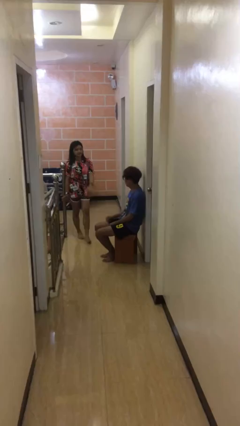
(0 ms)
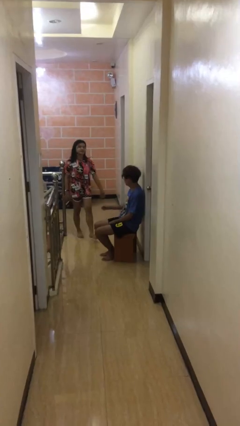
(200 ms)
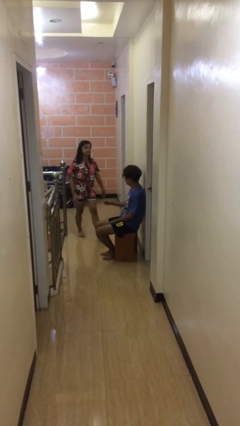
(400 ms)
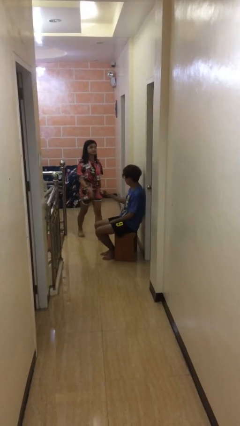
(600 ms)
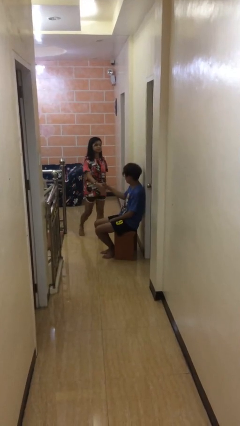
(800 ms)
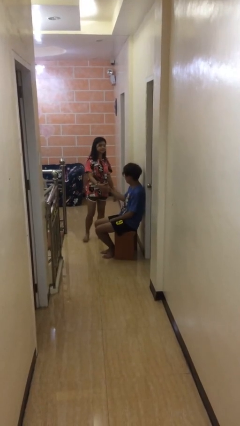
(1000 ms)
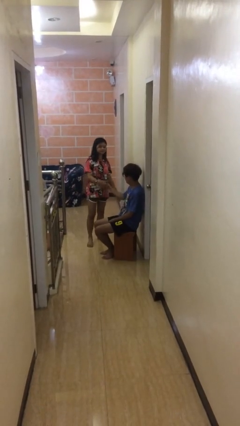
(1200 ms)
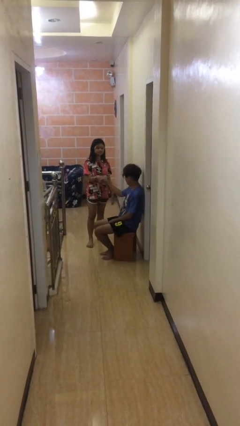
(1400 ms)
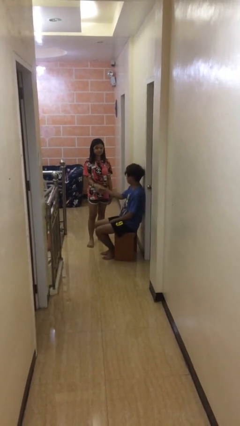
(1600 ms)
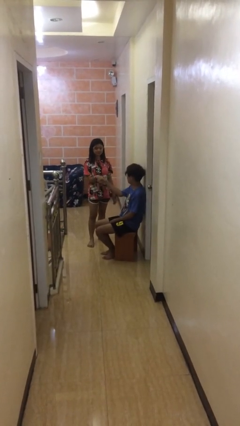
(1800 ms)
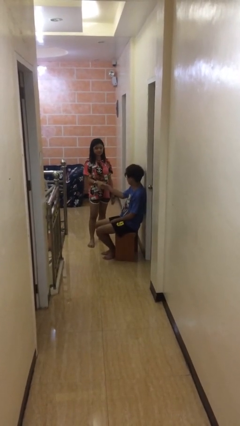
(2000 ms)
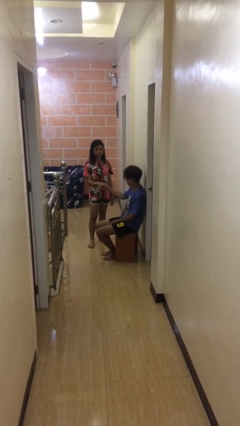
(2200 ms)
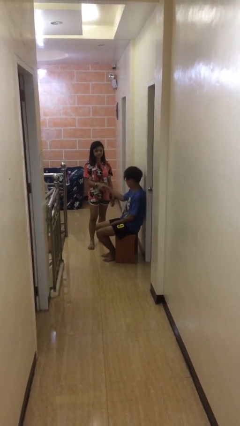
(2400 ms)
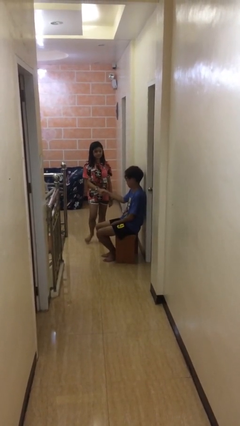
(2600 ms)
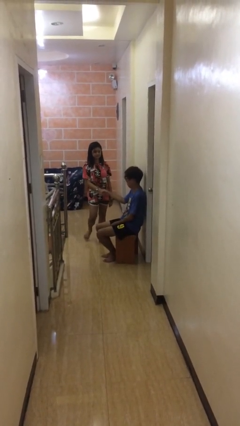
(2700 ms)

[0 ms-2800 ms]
person shakes hand

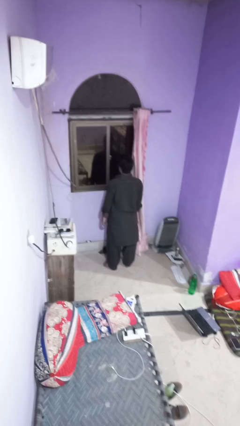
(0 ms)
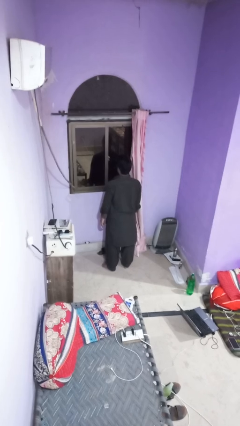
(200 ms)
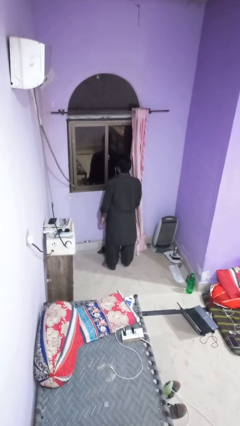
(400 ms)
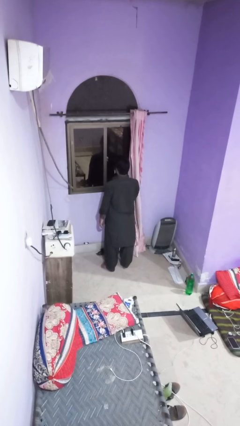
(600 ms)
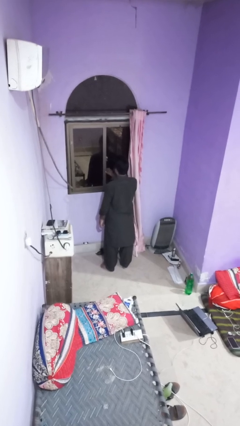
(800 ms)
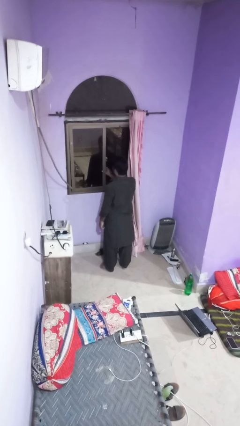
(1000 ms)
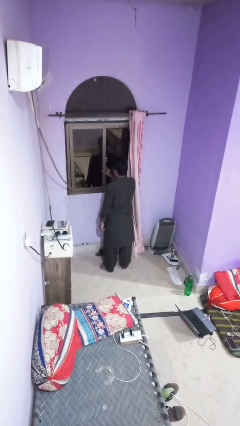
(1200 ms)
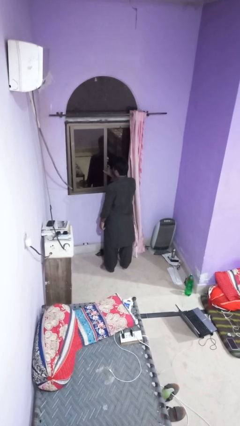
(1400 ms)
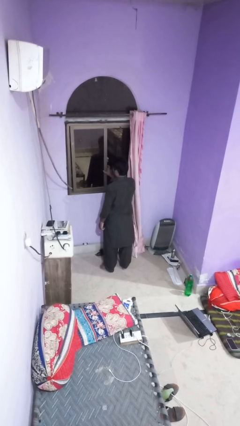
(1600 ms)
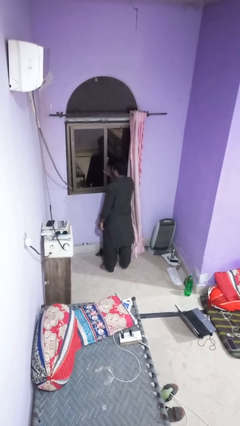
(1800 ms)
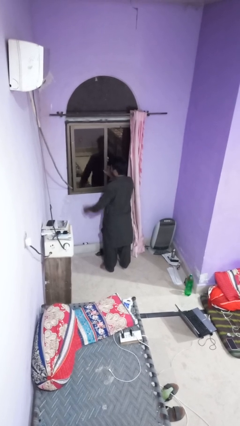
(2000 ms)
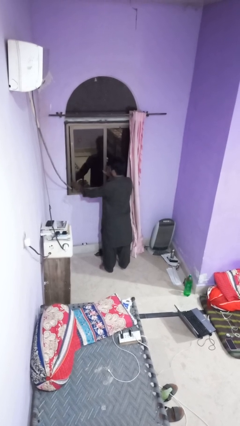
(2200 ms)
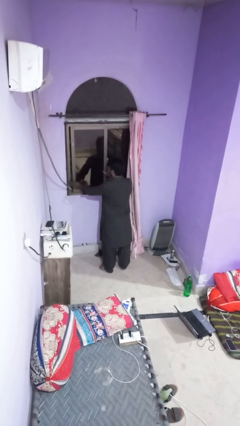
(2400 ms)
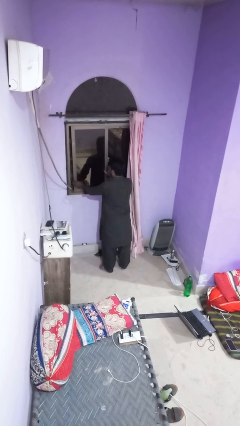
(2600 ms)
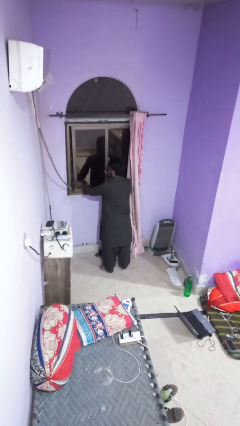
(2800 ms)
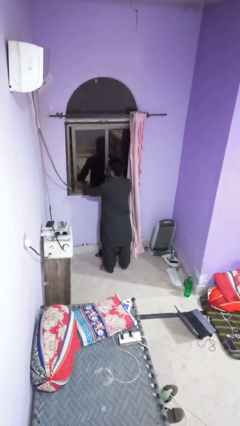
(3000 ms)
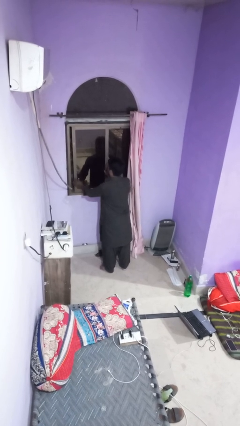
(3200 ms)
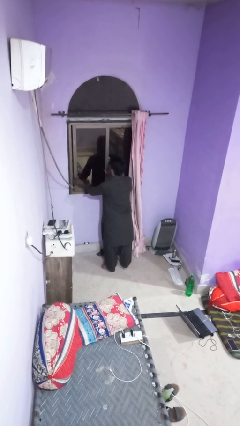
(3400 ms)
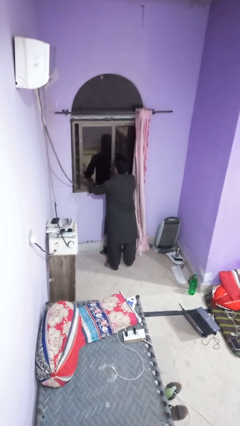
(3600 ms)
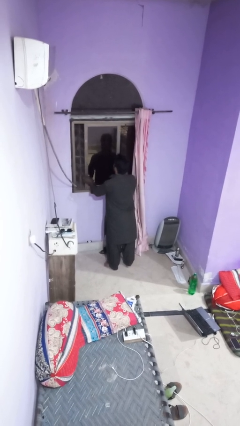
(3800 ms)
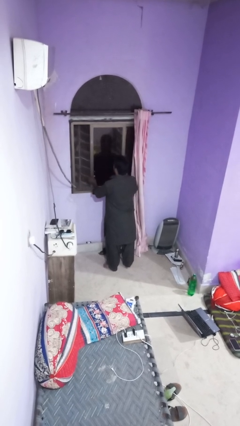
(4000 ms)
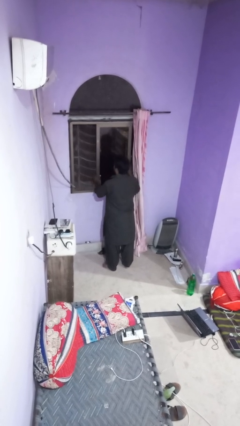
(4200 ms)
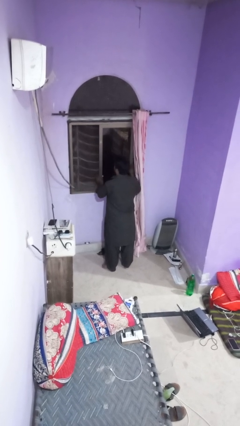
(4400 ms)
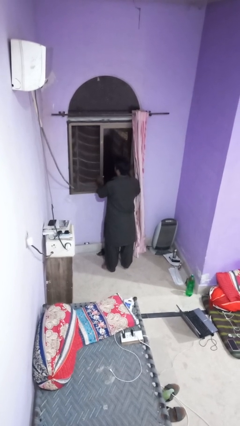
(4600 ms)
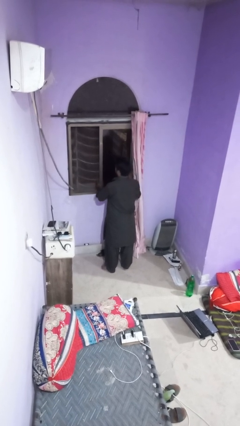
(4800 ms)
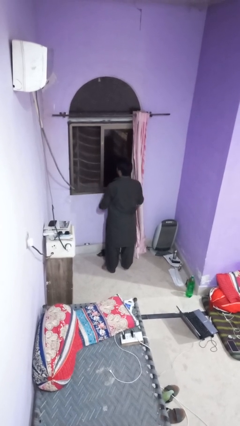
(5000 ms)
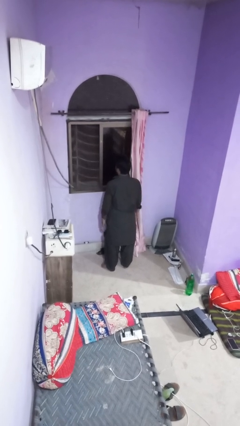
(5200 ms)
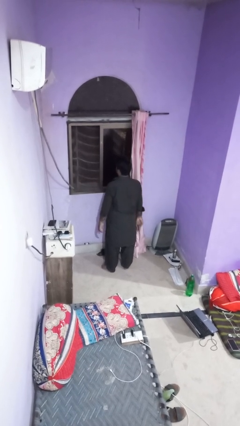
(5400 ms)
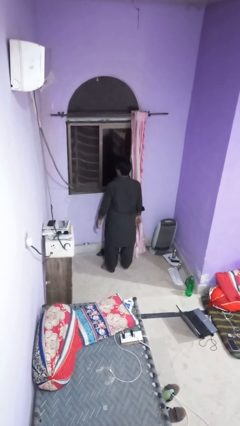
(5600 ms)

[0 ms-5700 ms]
person opens home window

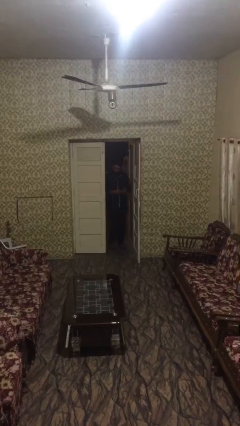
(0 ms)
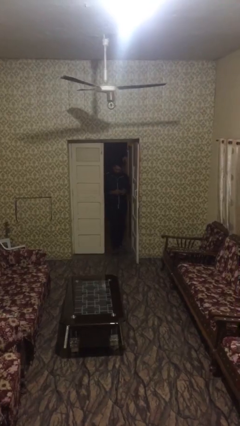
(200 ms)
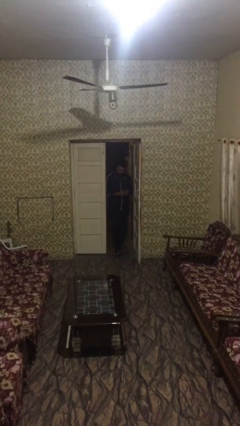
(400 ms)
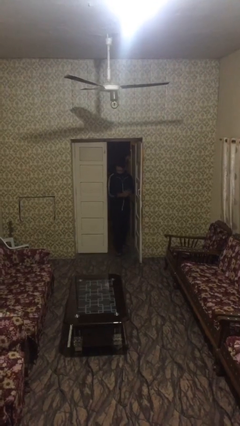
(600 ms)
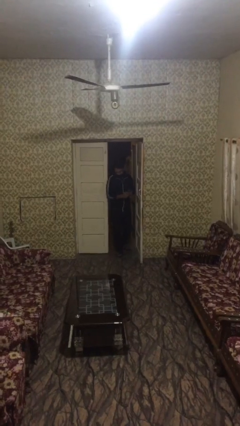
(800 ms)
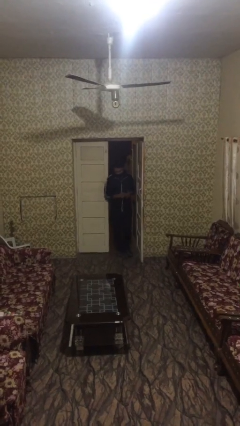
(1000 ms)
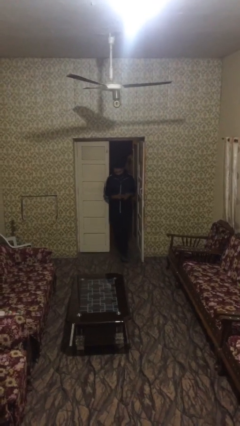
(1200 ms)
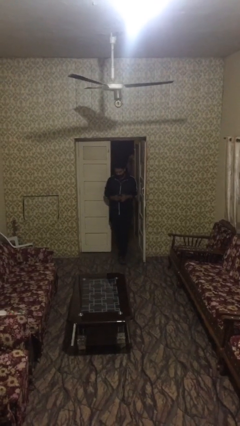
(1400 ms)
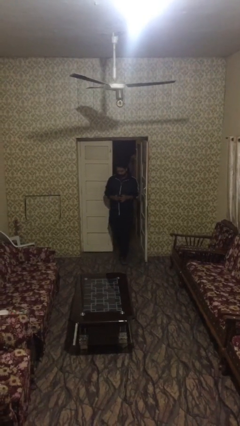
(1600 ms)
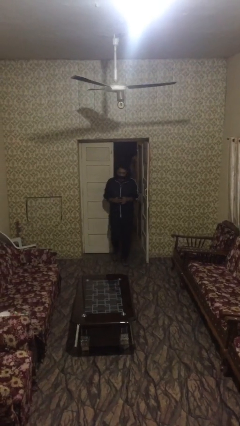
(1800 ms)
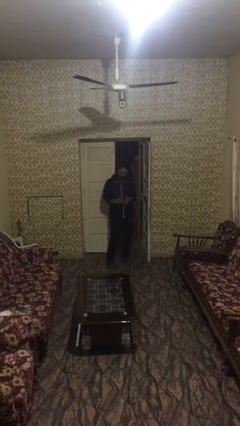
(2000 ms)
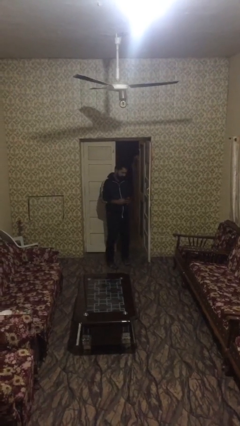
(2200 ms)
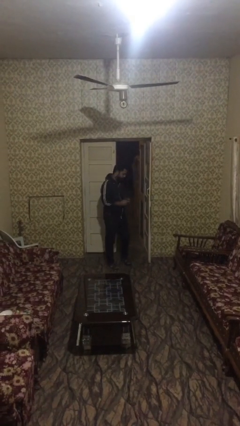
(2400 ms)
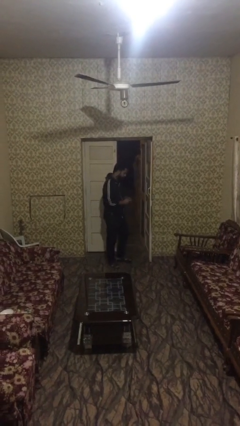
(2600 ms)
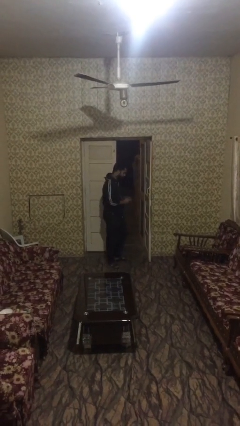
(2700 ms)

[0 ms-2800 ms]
person enters scene through structure

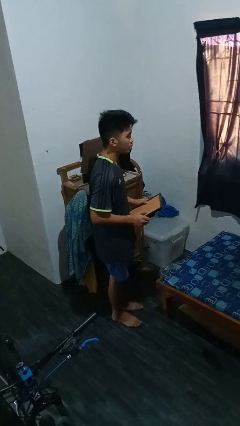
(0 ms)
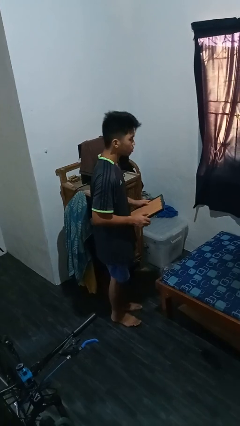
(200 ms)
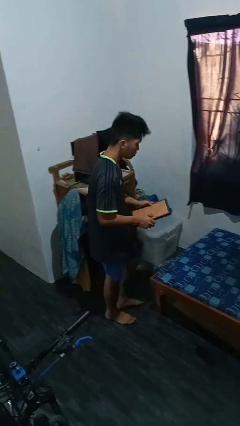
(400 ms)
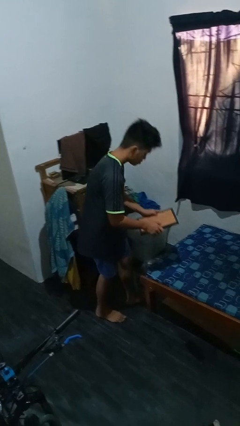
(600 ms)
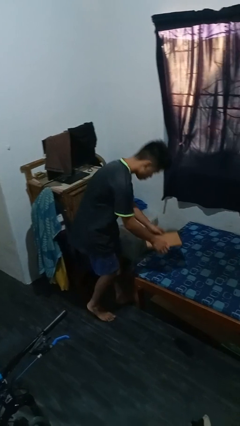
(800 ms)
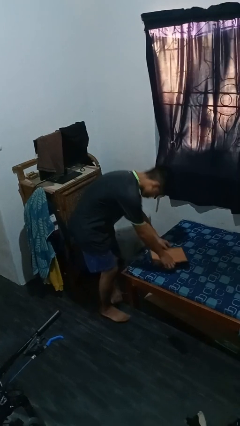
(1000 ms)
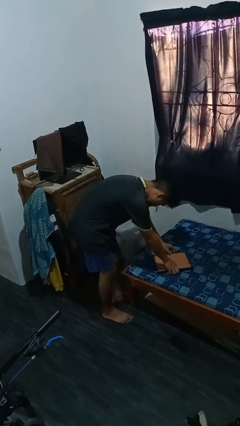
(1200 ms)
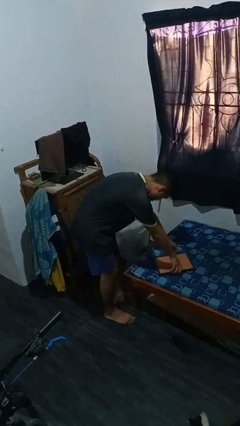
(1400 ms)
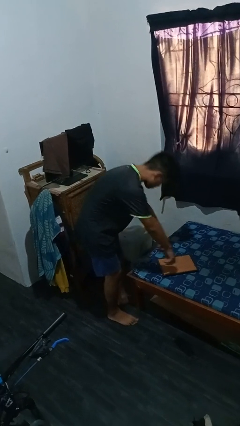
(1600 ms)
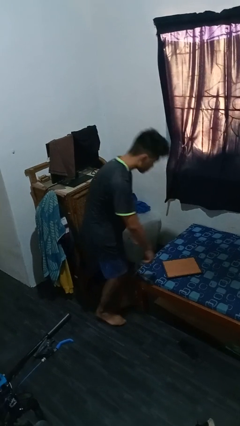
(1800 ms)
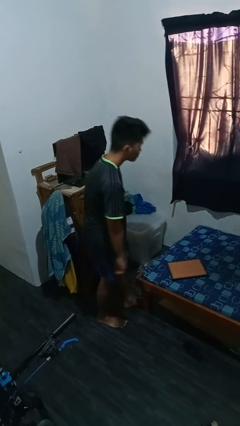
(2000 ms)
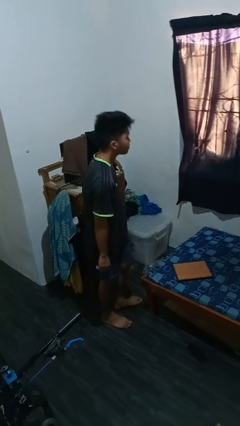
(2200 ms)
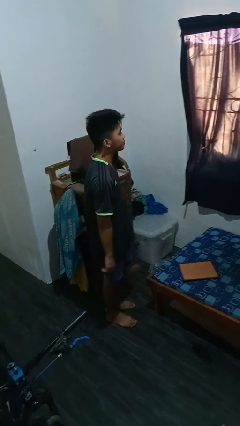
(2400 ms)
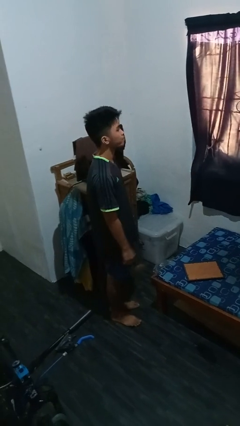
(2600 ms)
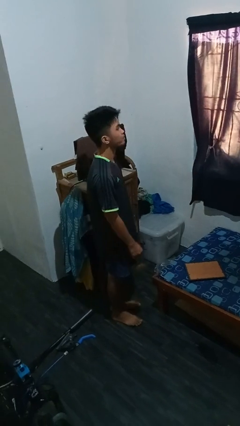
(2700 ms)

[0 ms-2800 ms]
person puts down object on bed

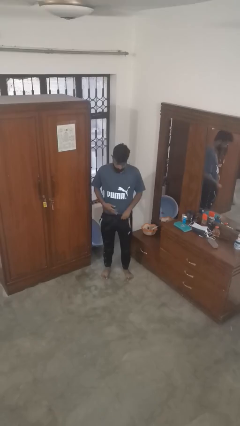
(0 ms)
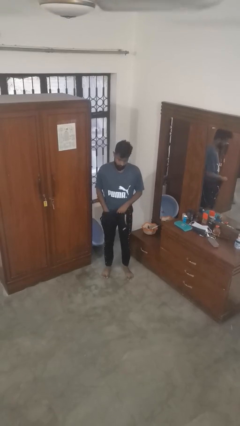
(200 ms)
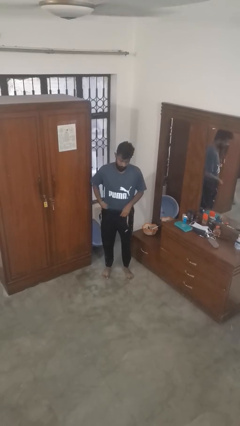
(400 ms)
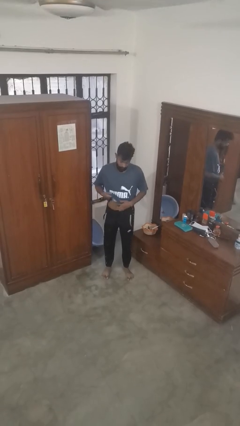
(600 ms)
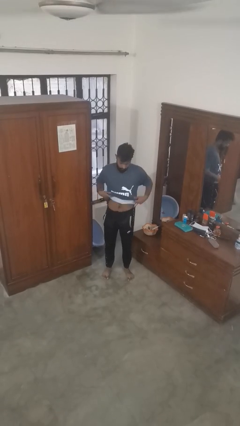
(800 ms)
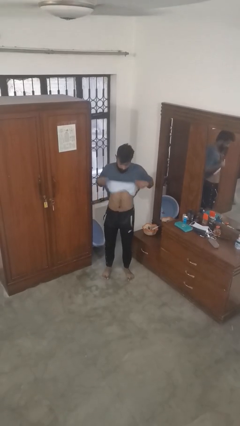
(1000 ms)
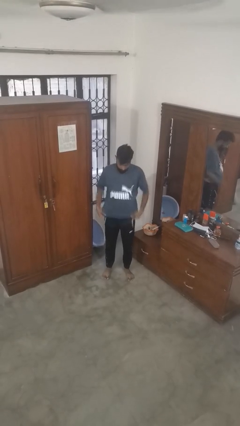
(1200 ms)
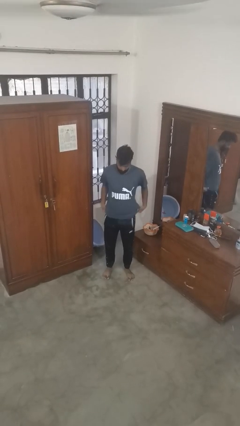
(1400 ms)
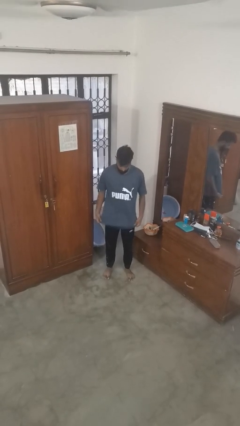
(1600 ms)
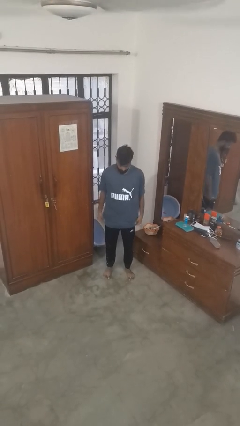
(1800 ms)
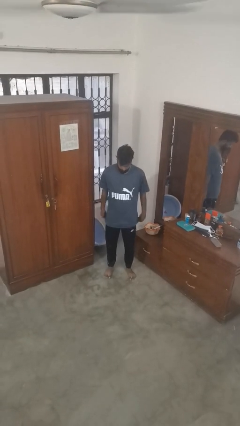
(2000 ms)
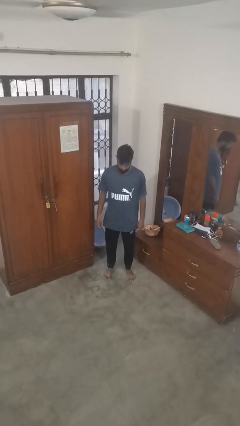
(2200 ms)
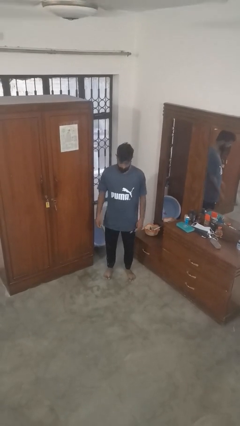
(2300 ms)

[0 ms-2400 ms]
person untucks shirt

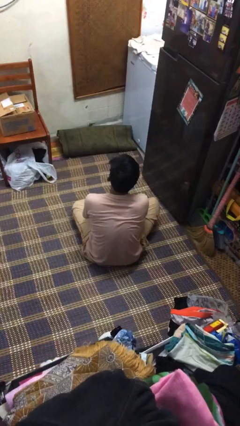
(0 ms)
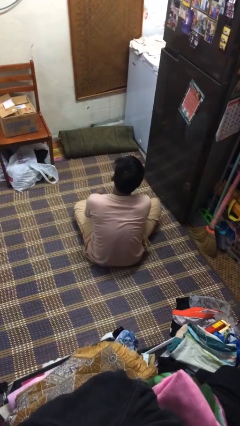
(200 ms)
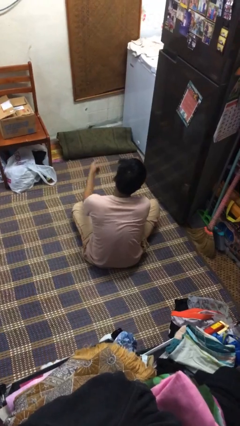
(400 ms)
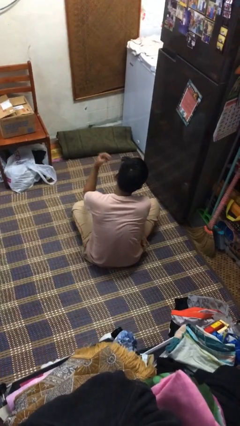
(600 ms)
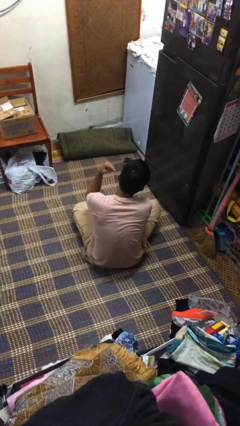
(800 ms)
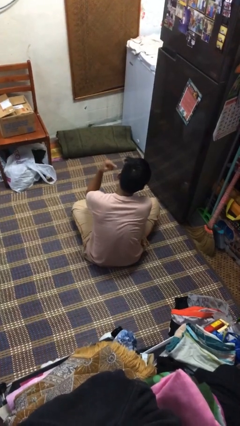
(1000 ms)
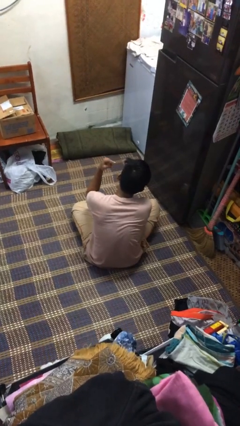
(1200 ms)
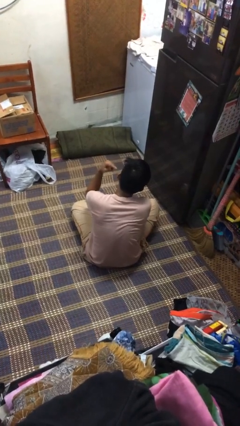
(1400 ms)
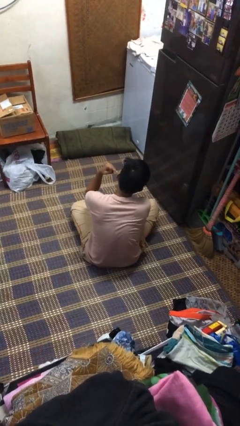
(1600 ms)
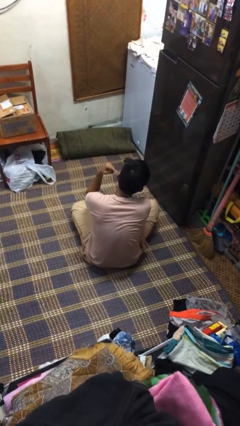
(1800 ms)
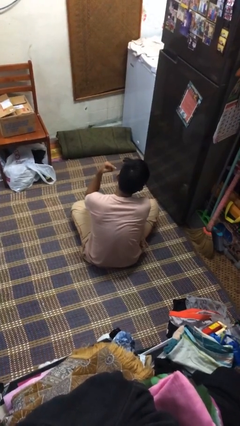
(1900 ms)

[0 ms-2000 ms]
person gestures listen closely
